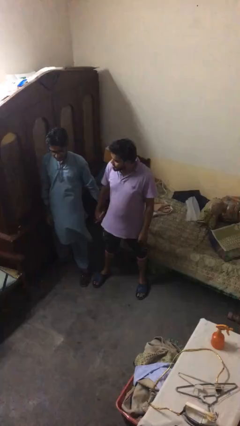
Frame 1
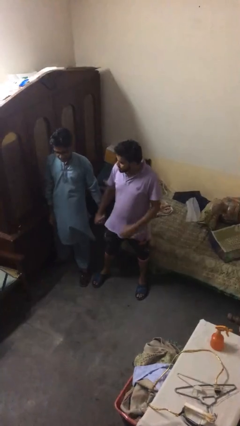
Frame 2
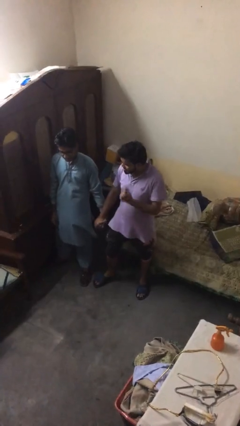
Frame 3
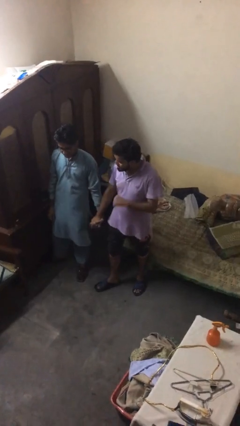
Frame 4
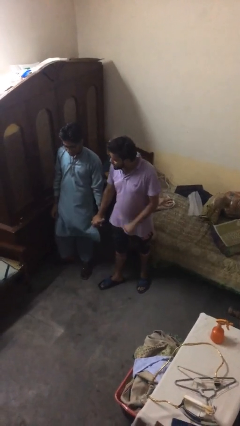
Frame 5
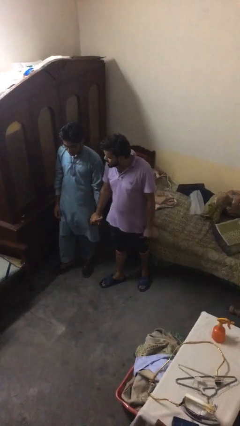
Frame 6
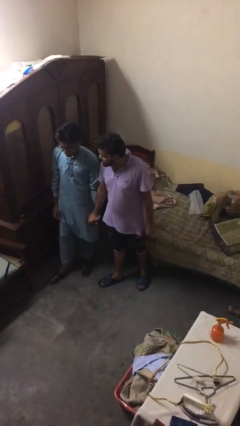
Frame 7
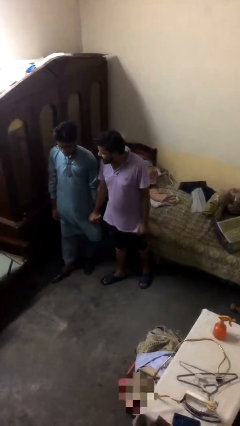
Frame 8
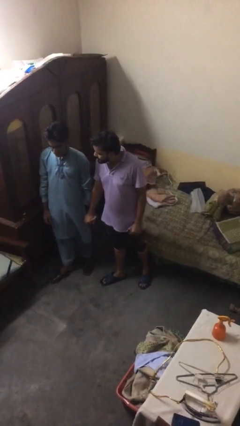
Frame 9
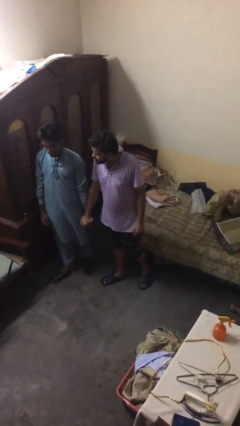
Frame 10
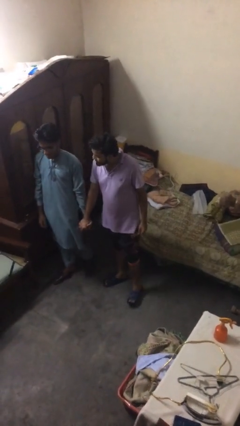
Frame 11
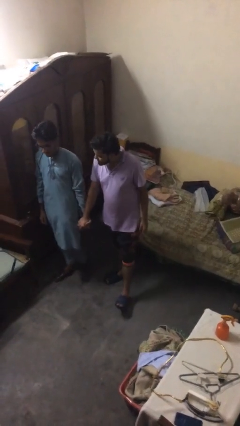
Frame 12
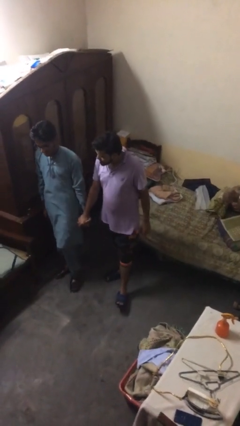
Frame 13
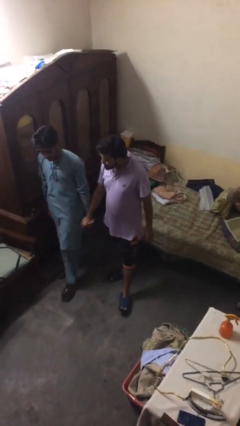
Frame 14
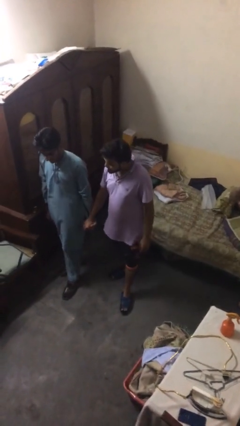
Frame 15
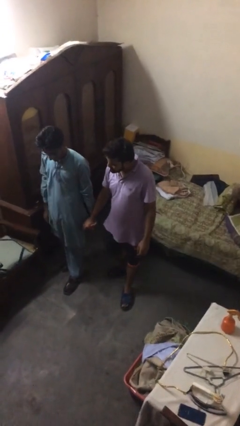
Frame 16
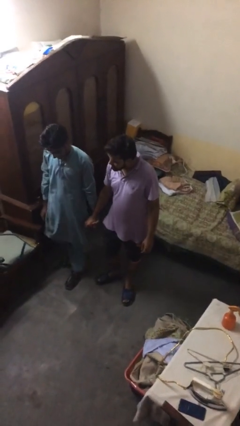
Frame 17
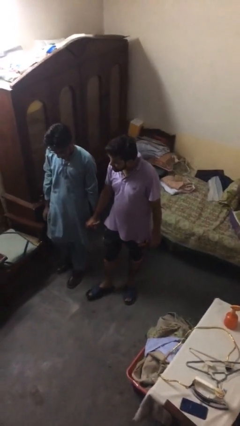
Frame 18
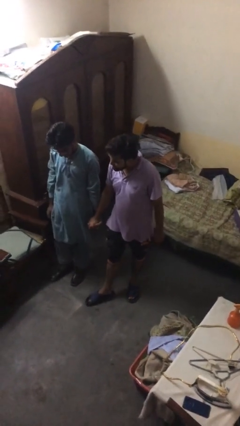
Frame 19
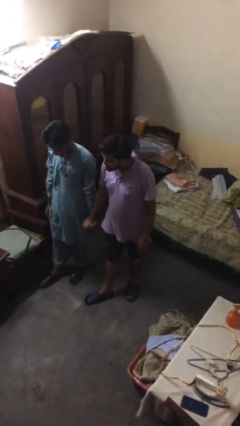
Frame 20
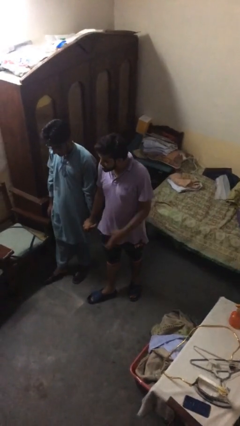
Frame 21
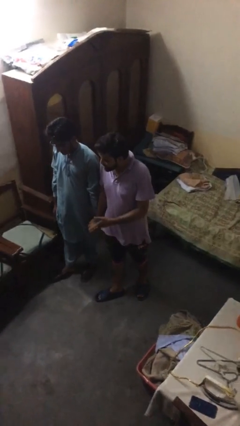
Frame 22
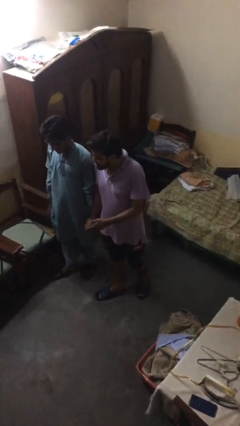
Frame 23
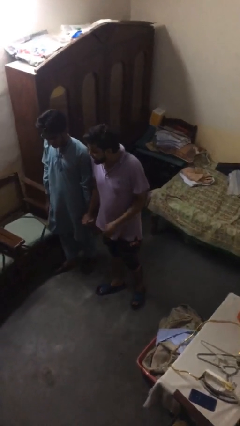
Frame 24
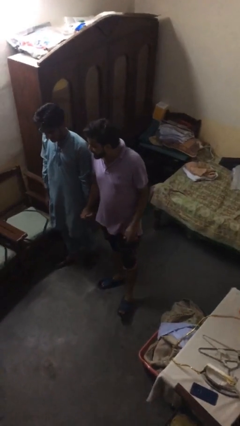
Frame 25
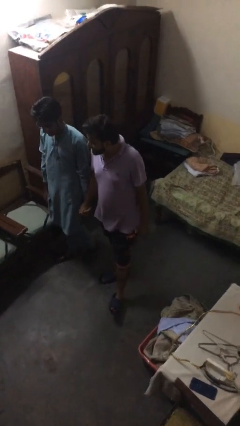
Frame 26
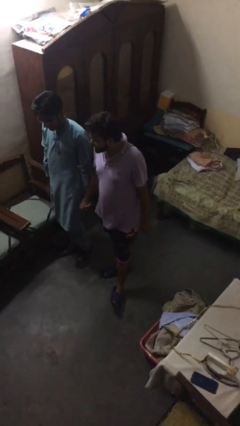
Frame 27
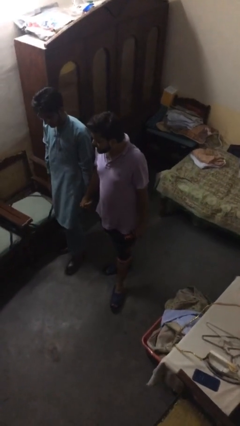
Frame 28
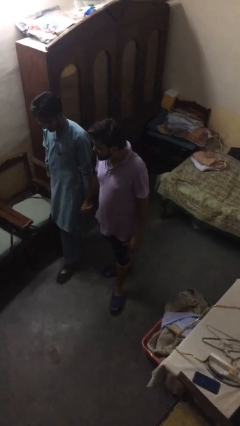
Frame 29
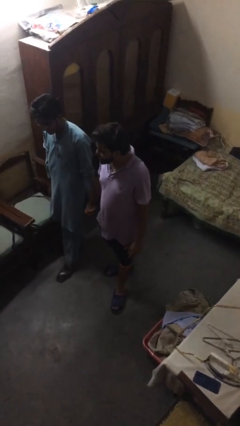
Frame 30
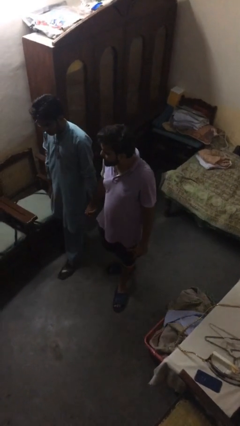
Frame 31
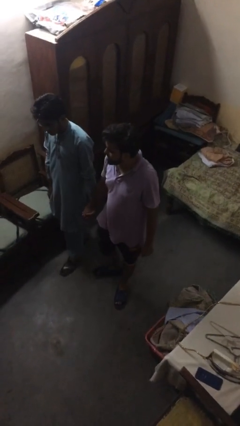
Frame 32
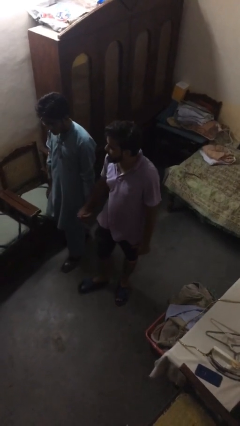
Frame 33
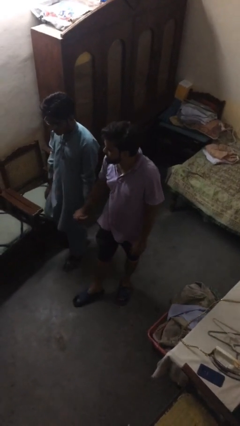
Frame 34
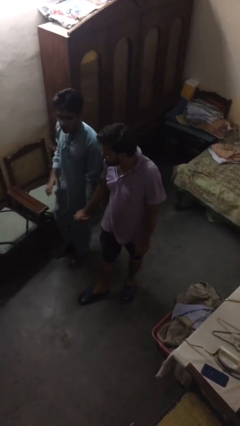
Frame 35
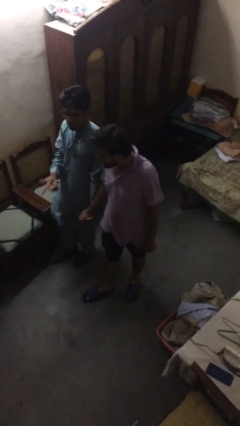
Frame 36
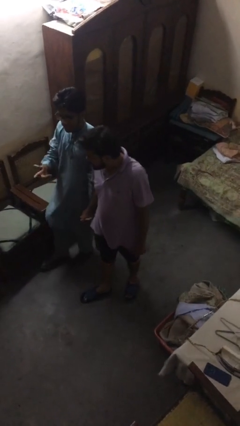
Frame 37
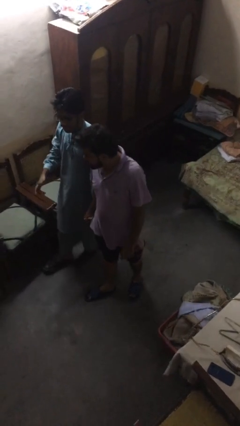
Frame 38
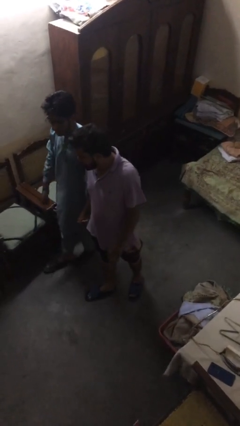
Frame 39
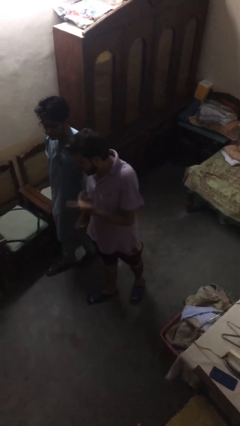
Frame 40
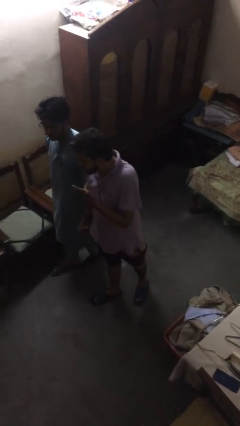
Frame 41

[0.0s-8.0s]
person holds hand

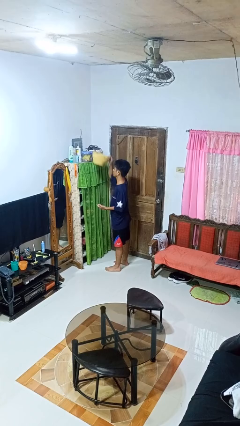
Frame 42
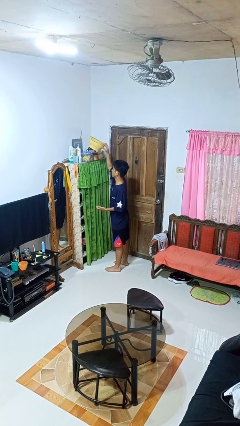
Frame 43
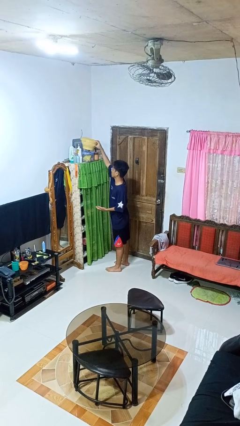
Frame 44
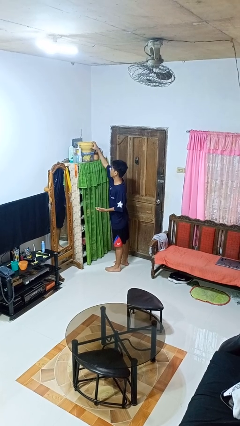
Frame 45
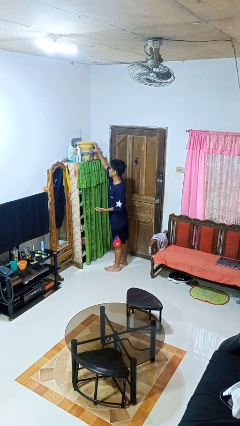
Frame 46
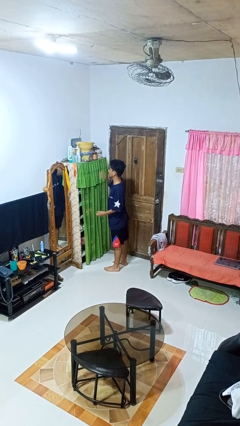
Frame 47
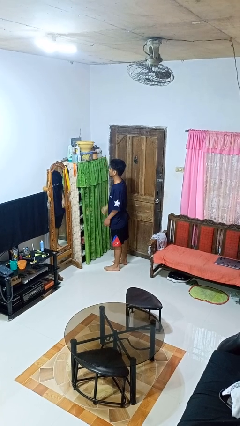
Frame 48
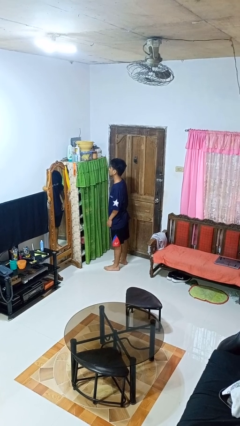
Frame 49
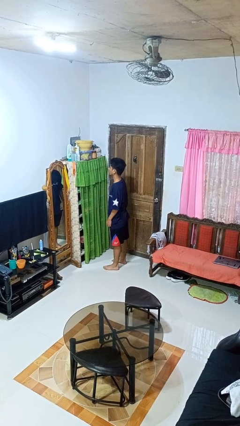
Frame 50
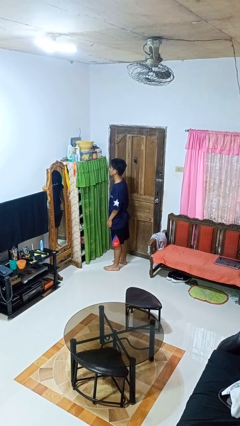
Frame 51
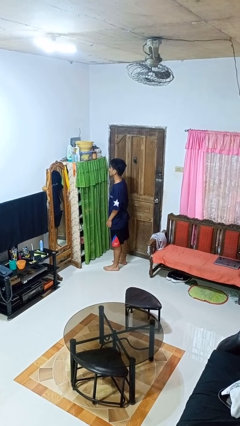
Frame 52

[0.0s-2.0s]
person puts down object on shelf

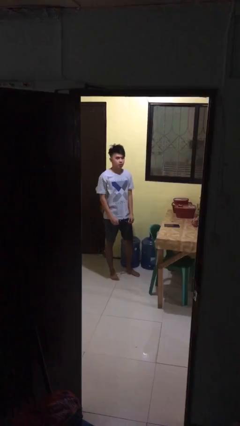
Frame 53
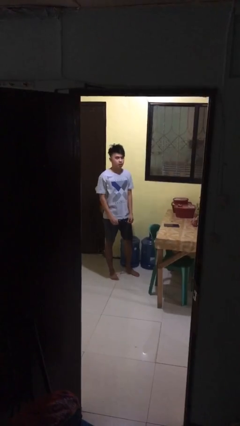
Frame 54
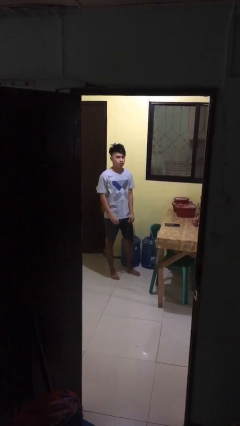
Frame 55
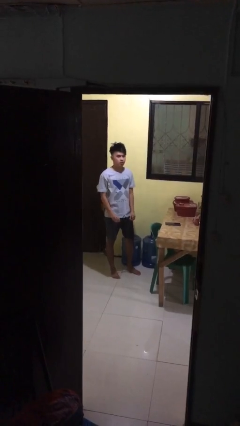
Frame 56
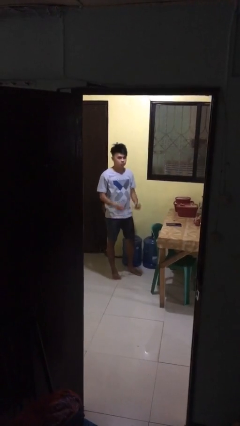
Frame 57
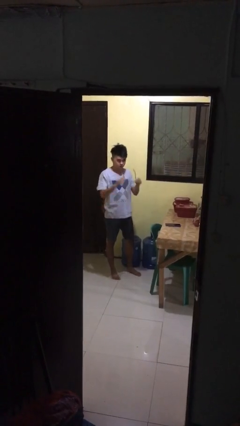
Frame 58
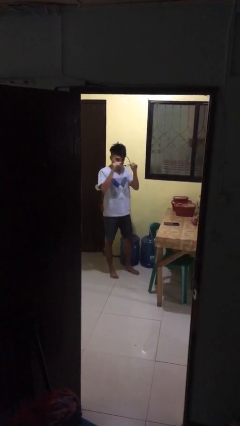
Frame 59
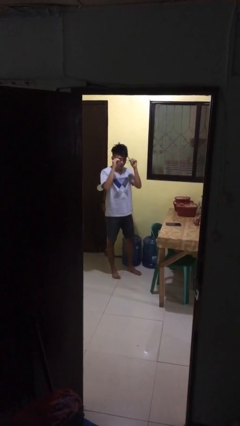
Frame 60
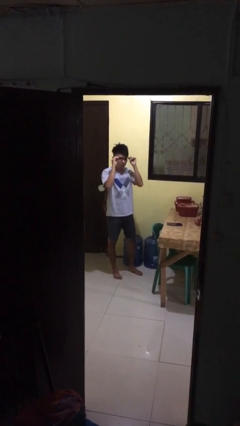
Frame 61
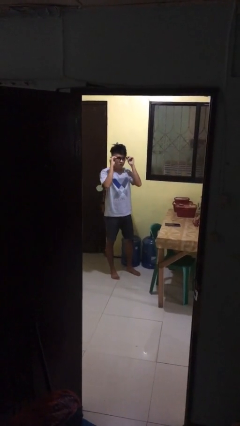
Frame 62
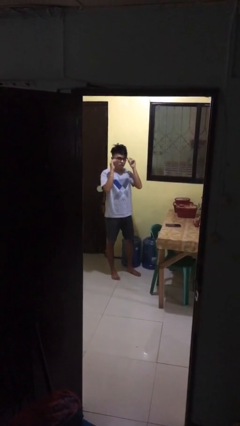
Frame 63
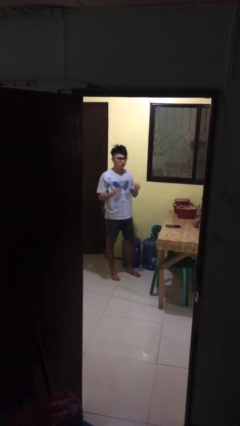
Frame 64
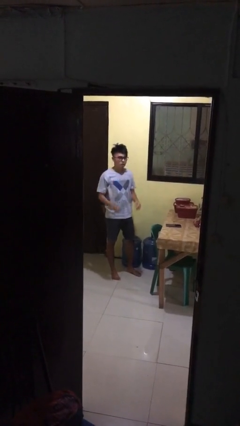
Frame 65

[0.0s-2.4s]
person puts on glasses

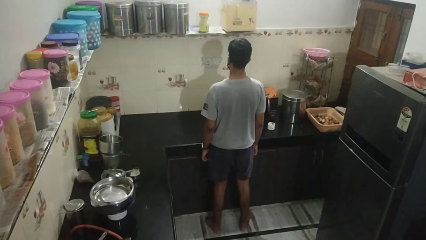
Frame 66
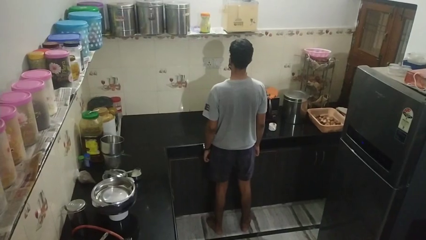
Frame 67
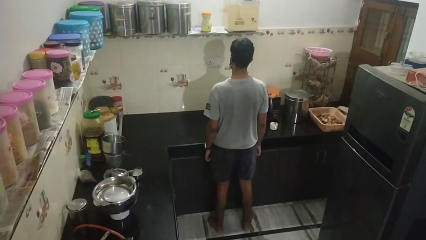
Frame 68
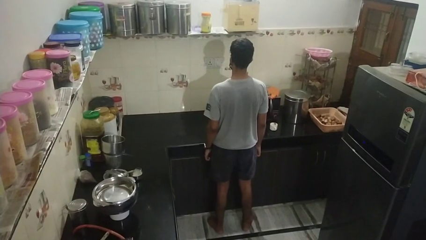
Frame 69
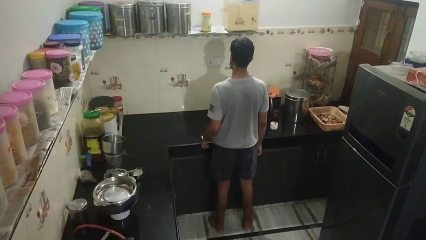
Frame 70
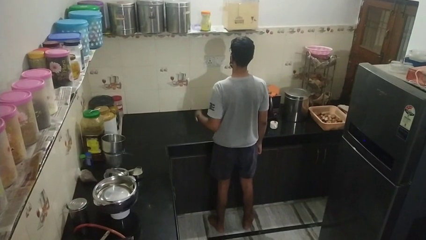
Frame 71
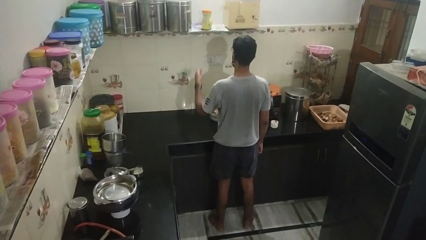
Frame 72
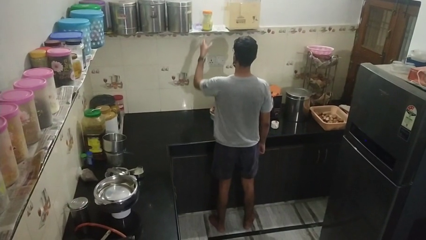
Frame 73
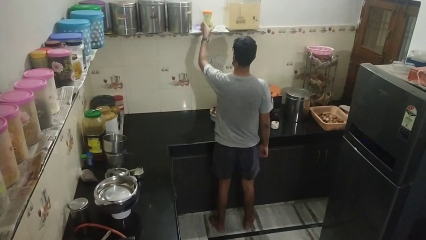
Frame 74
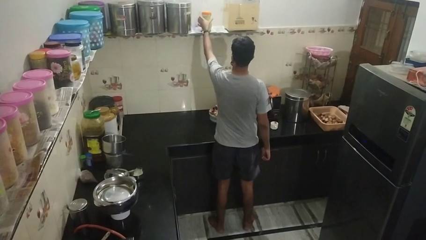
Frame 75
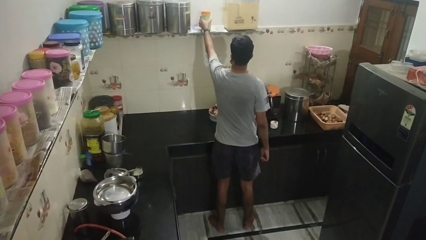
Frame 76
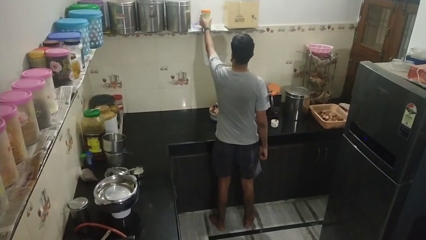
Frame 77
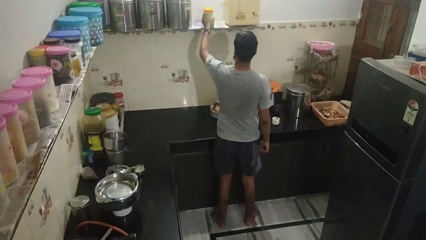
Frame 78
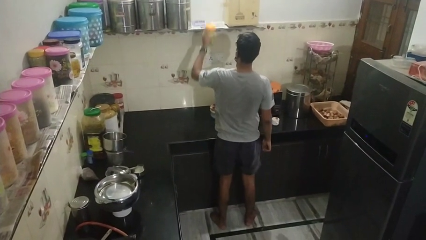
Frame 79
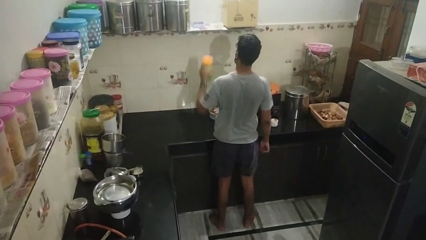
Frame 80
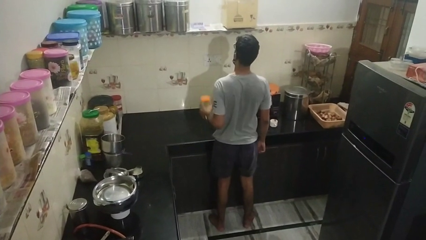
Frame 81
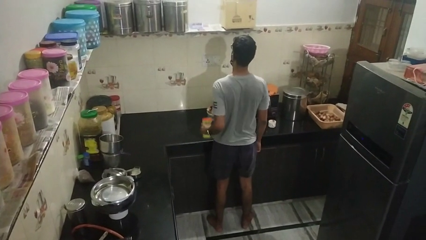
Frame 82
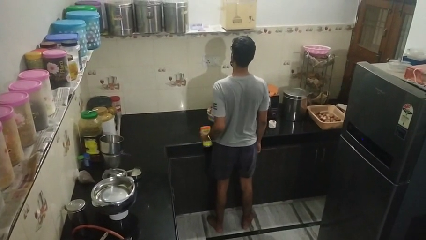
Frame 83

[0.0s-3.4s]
person picks up object from shelf

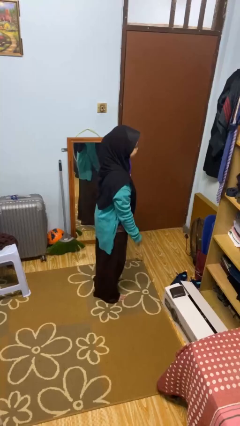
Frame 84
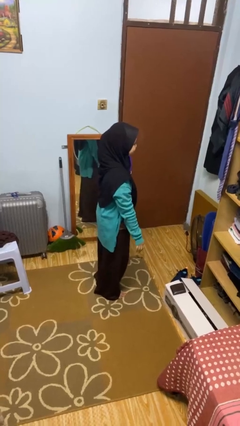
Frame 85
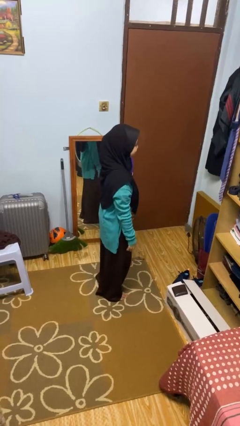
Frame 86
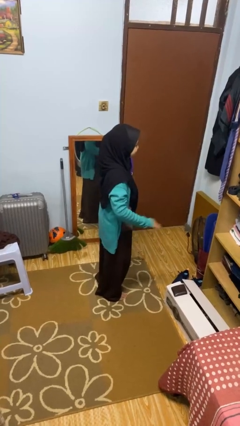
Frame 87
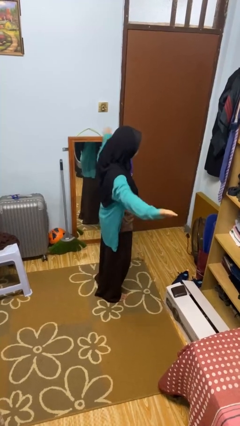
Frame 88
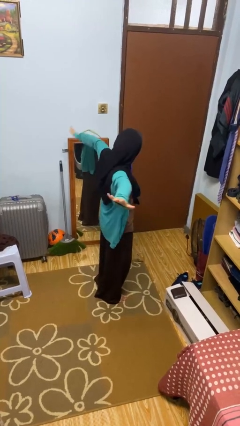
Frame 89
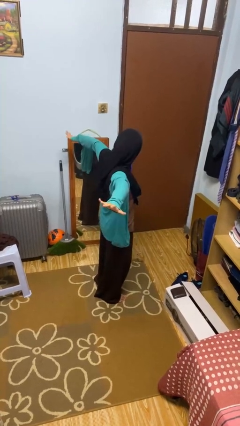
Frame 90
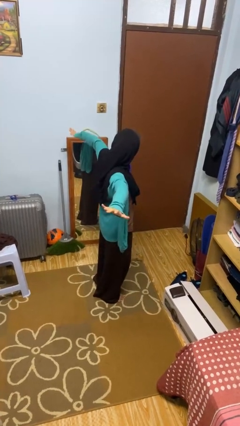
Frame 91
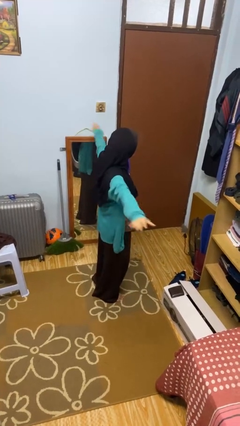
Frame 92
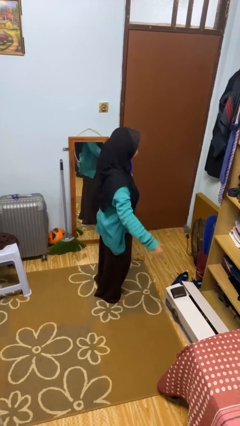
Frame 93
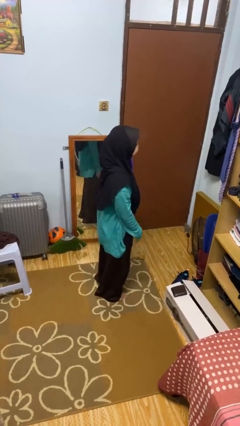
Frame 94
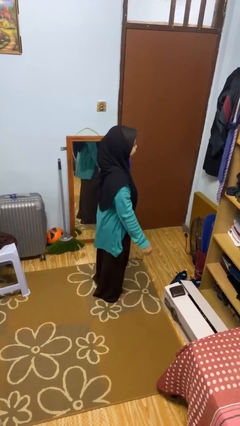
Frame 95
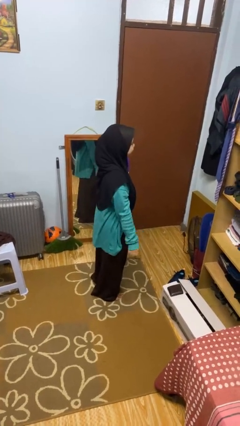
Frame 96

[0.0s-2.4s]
person stretches arms to side
